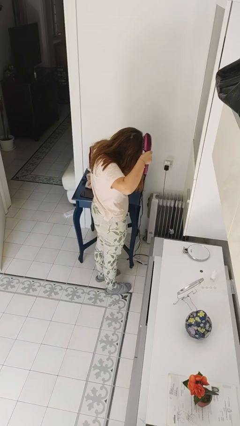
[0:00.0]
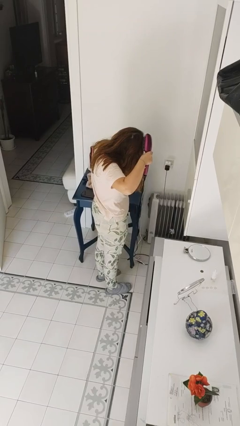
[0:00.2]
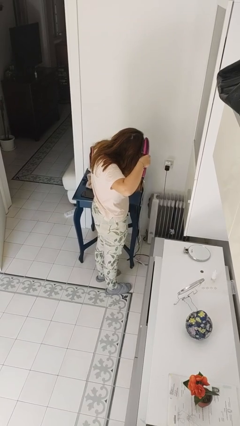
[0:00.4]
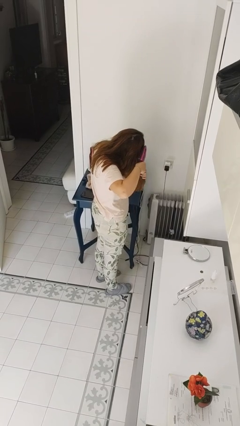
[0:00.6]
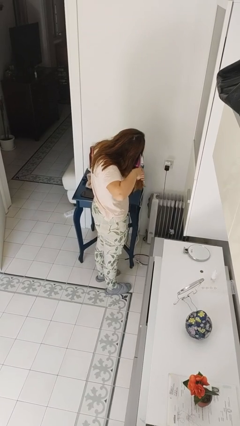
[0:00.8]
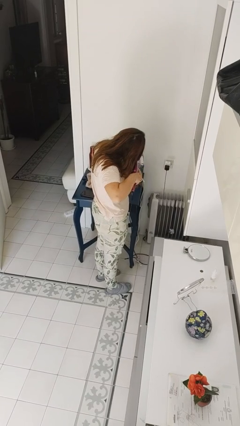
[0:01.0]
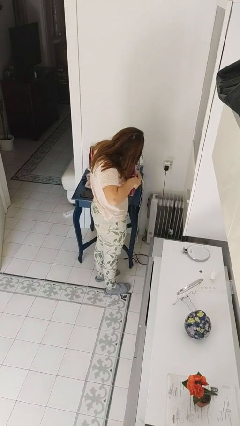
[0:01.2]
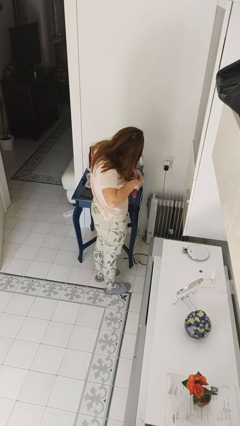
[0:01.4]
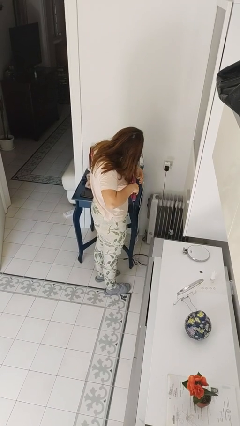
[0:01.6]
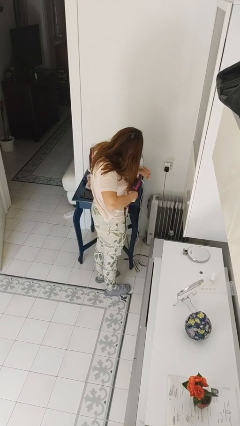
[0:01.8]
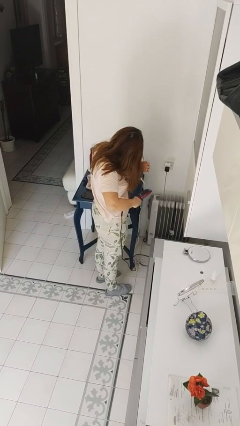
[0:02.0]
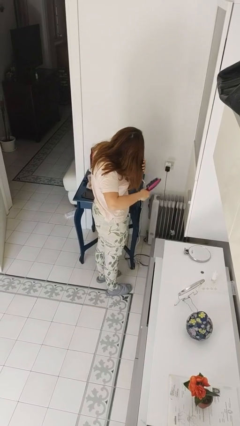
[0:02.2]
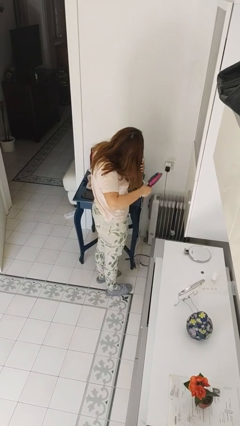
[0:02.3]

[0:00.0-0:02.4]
person dries hair with hairdryer

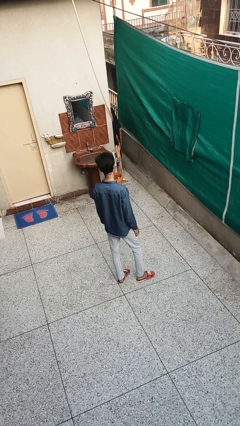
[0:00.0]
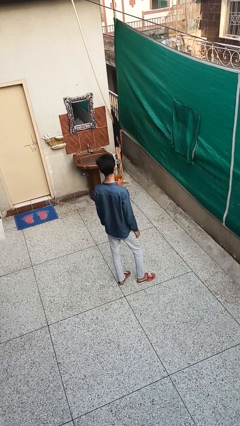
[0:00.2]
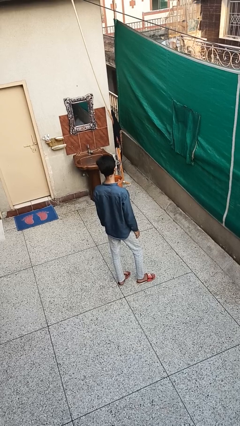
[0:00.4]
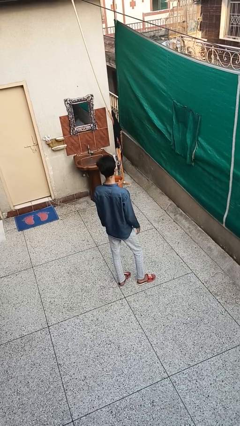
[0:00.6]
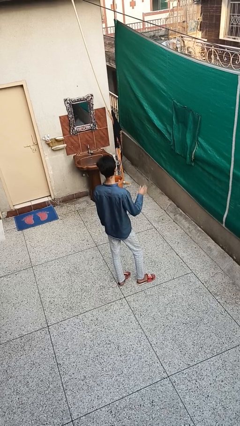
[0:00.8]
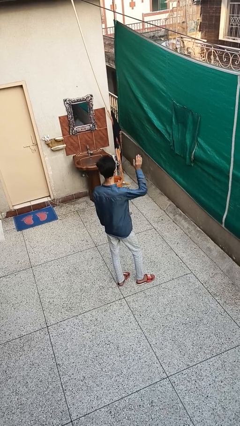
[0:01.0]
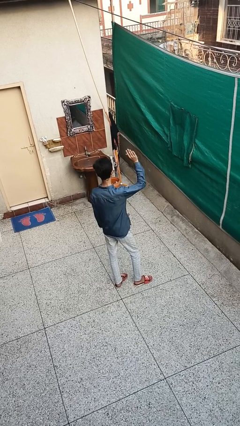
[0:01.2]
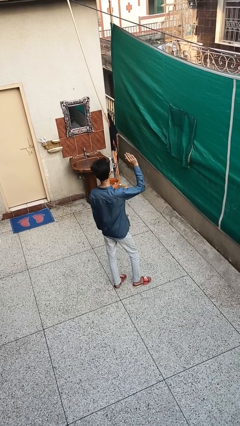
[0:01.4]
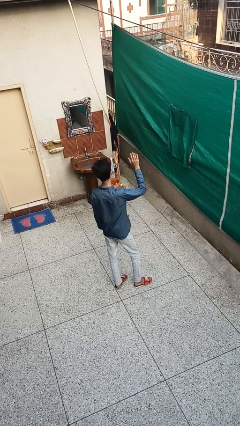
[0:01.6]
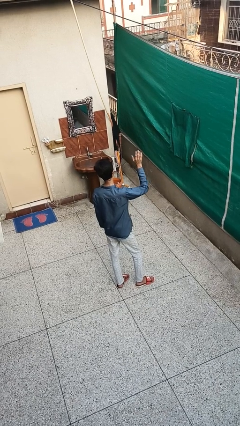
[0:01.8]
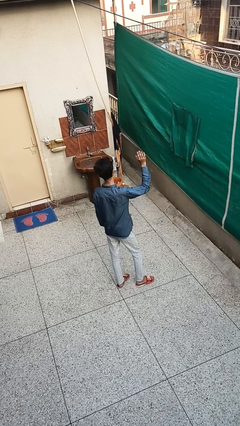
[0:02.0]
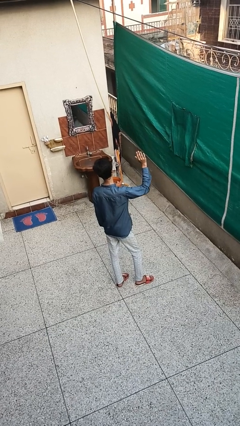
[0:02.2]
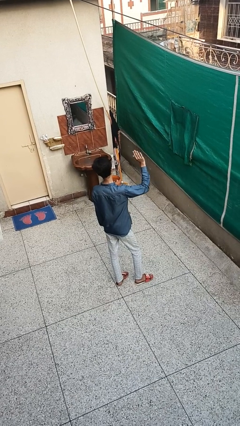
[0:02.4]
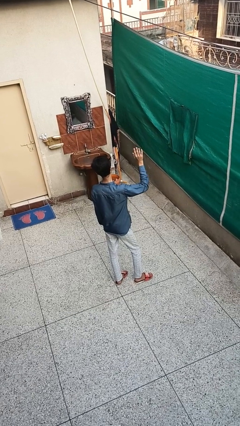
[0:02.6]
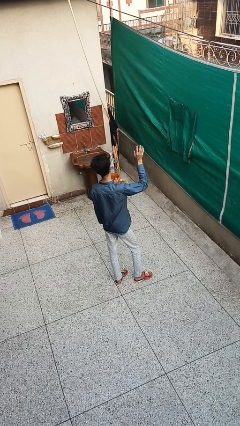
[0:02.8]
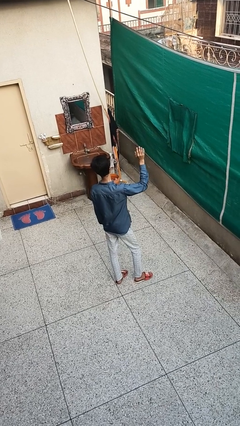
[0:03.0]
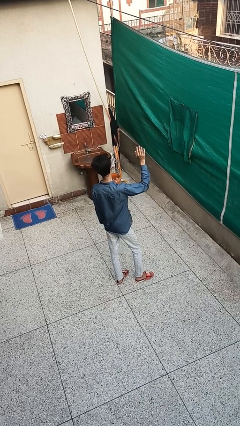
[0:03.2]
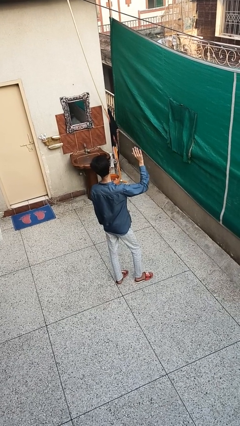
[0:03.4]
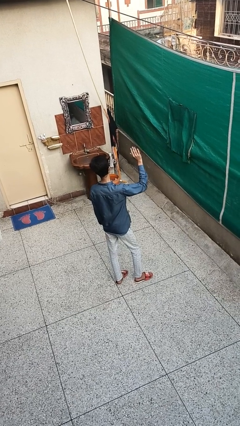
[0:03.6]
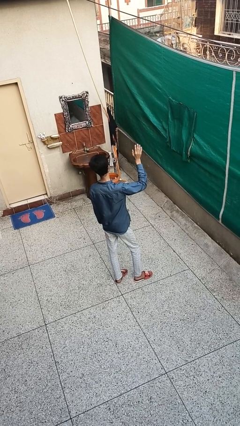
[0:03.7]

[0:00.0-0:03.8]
person waves at person

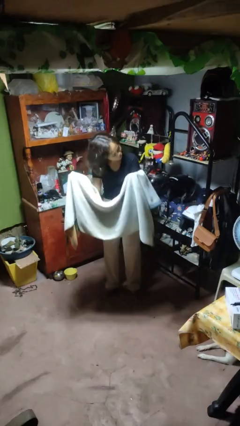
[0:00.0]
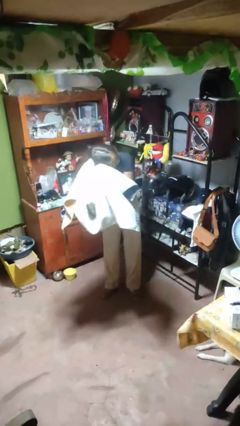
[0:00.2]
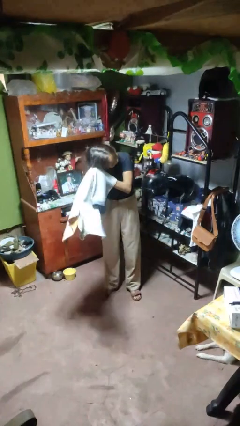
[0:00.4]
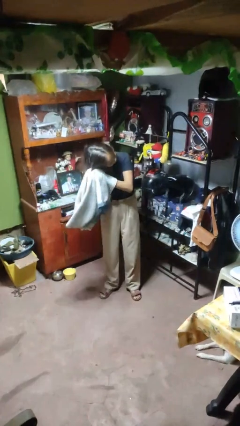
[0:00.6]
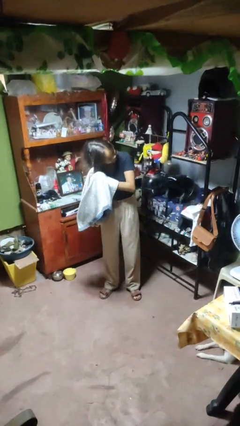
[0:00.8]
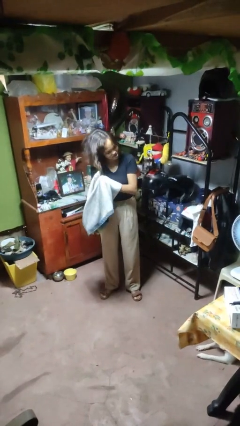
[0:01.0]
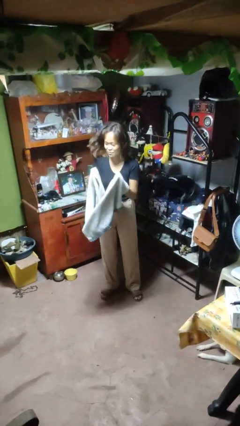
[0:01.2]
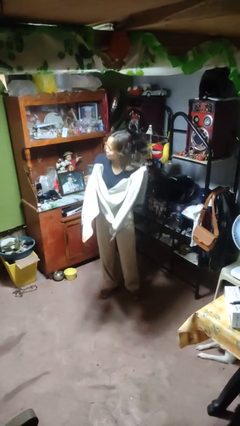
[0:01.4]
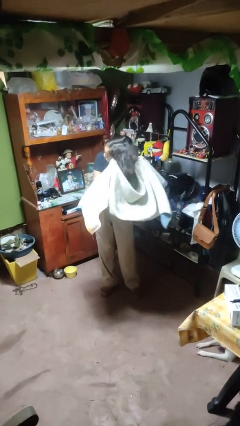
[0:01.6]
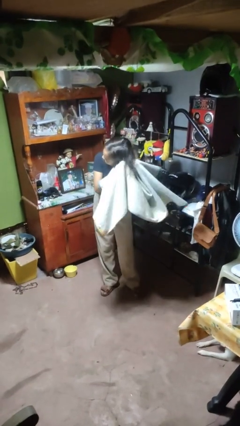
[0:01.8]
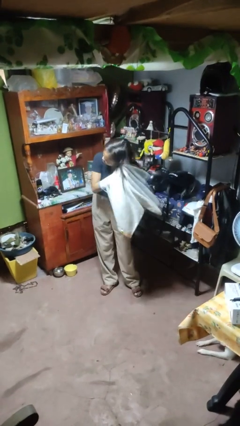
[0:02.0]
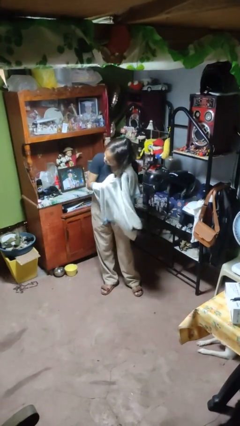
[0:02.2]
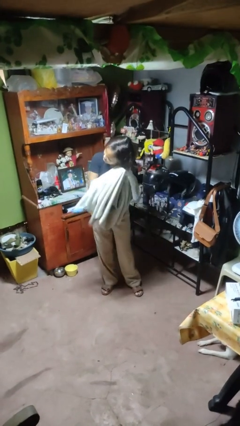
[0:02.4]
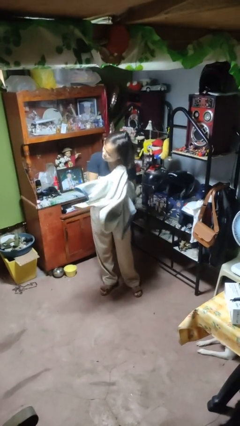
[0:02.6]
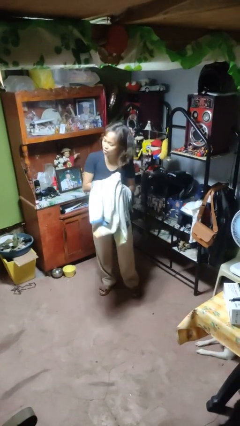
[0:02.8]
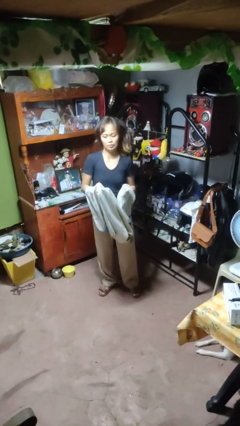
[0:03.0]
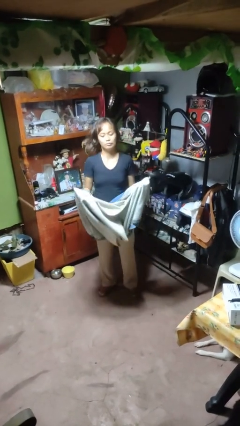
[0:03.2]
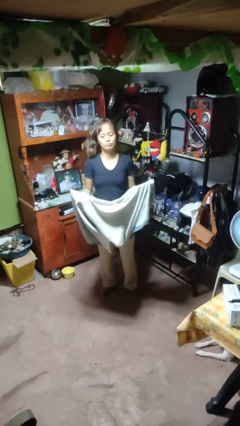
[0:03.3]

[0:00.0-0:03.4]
person dries hair with towel

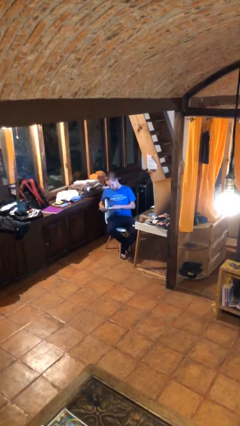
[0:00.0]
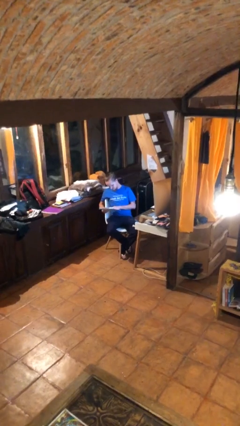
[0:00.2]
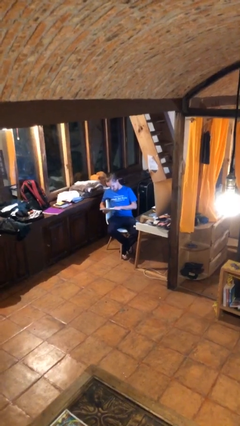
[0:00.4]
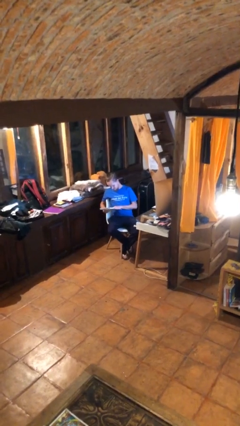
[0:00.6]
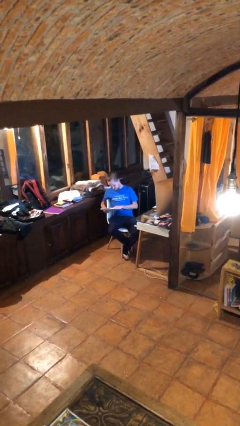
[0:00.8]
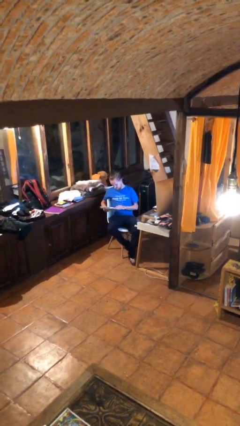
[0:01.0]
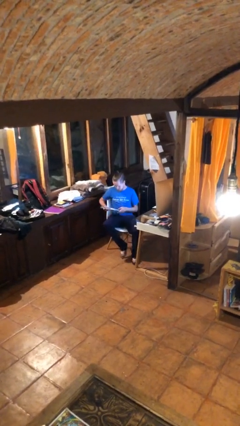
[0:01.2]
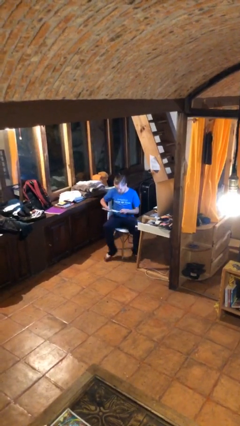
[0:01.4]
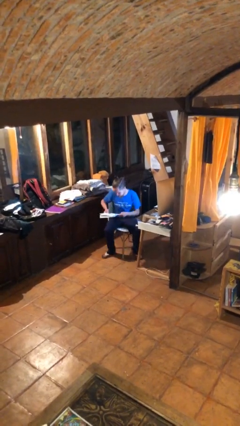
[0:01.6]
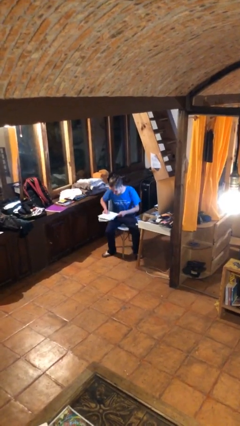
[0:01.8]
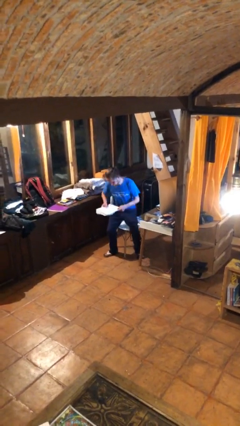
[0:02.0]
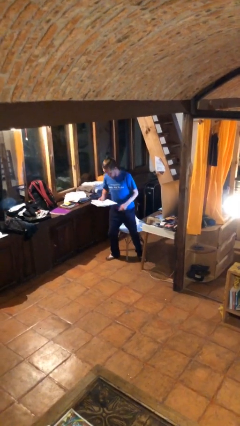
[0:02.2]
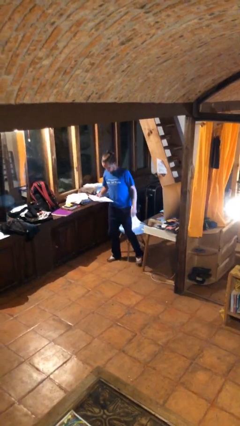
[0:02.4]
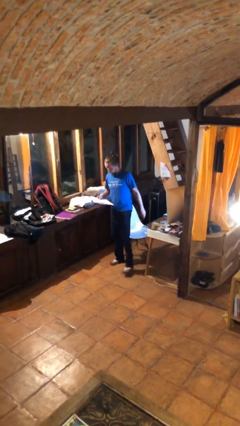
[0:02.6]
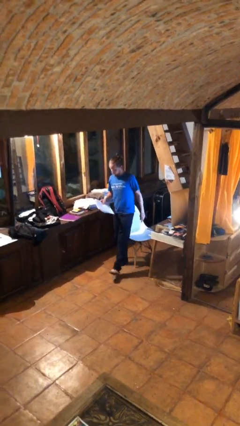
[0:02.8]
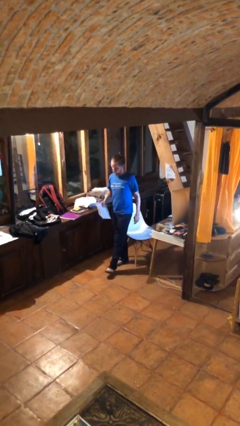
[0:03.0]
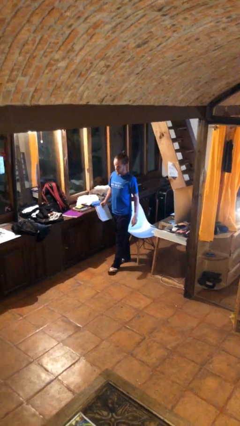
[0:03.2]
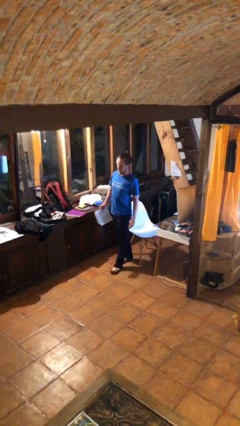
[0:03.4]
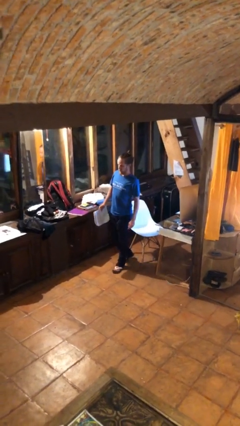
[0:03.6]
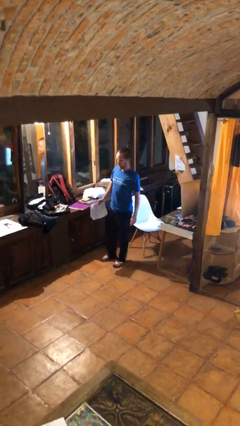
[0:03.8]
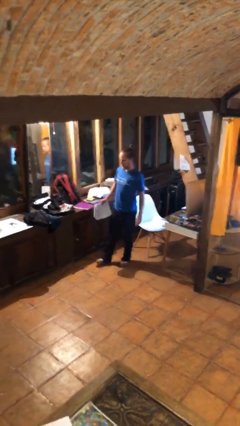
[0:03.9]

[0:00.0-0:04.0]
person stands up

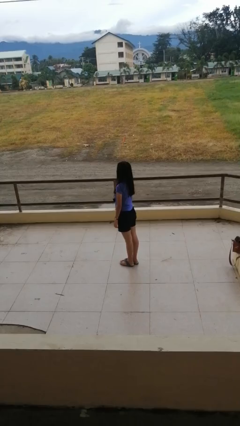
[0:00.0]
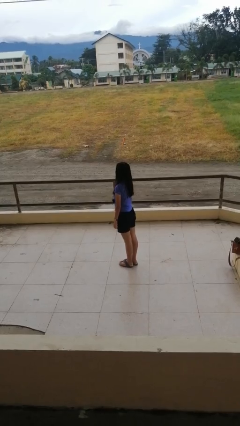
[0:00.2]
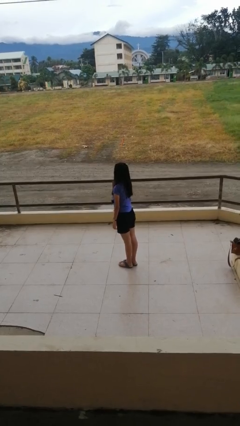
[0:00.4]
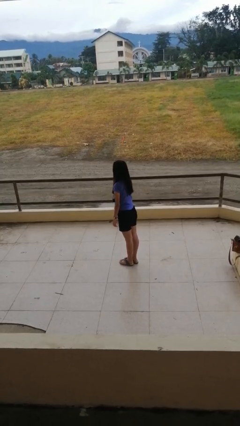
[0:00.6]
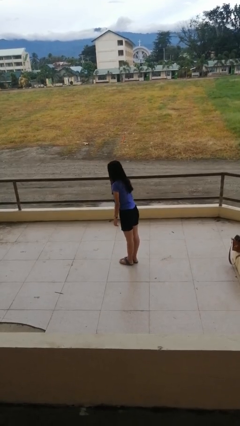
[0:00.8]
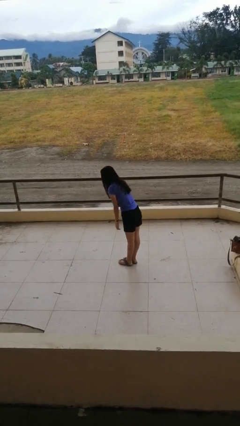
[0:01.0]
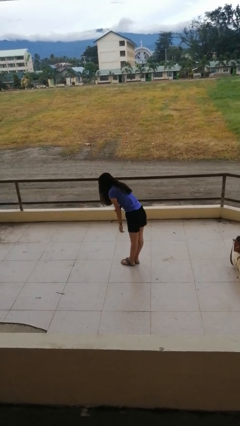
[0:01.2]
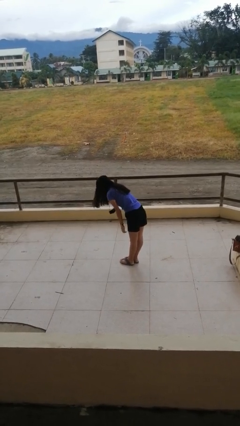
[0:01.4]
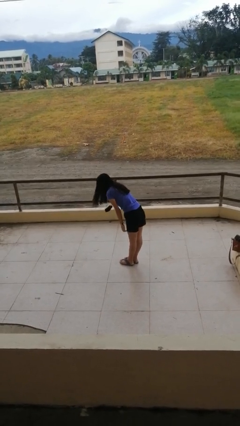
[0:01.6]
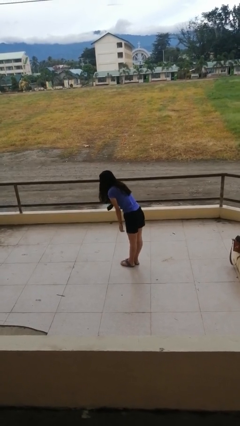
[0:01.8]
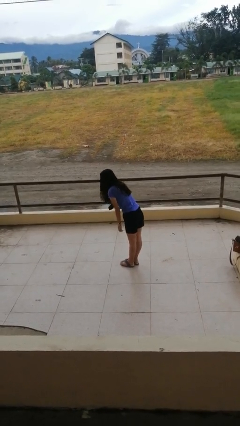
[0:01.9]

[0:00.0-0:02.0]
person bows

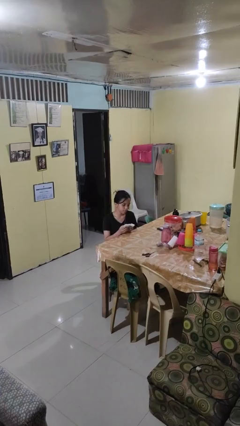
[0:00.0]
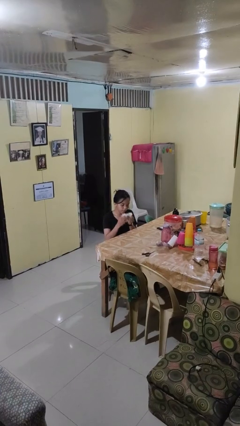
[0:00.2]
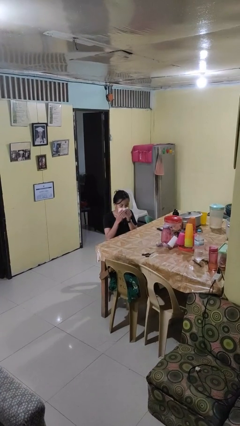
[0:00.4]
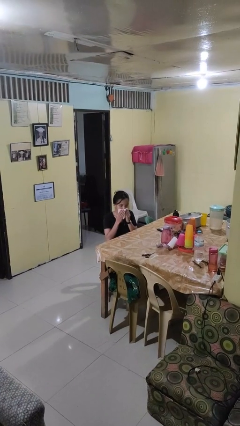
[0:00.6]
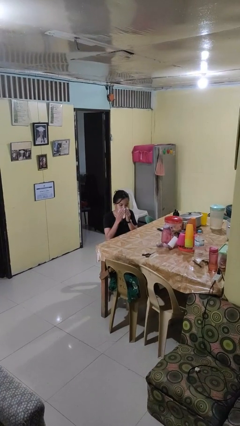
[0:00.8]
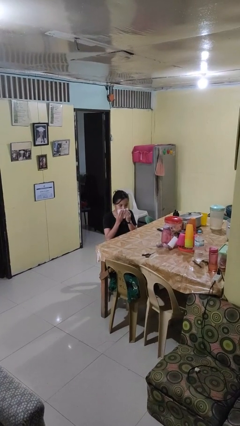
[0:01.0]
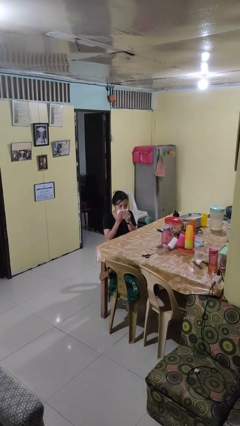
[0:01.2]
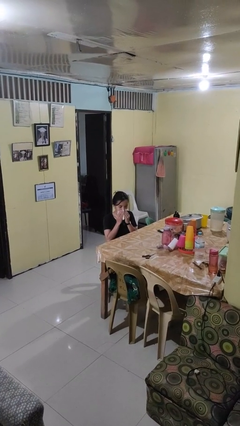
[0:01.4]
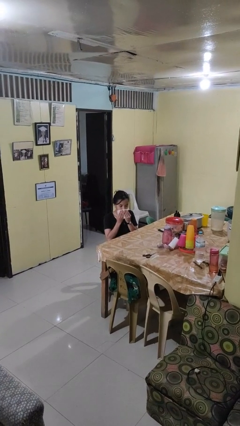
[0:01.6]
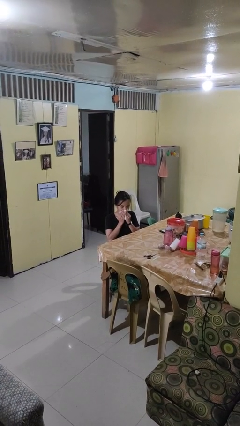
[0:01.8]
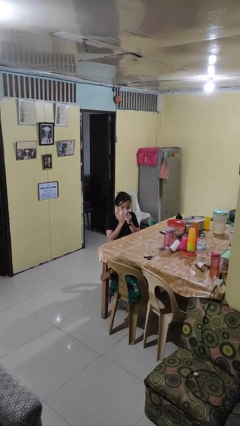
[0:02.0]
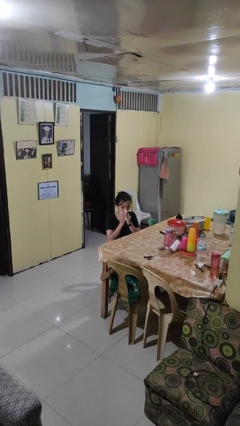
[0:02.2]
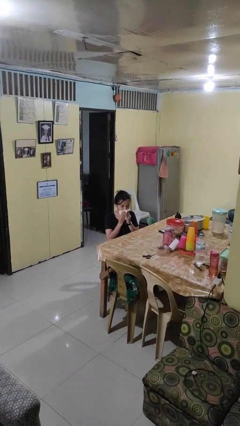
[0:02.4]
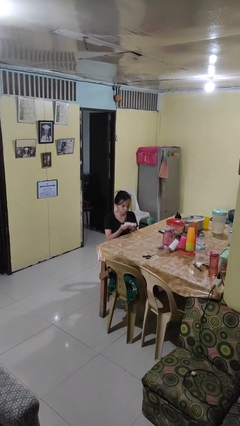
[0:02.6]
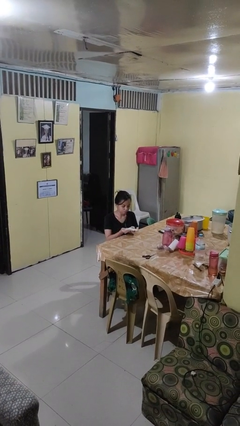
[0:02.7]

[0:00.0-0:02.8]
person wipes mouth with napkin
